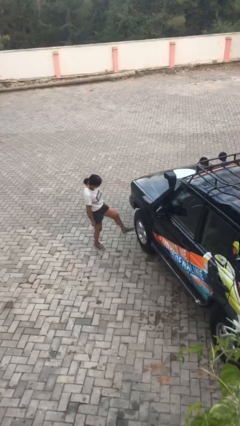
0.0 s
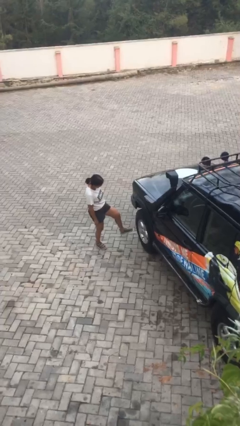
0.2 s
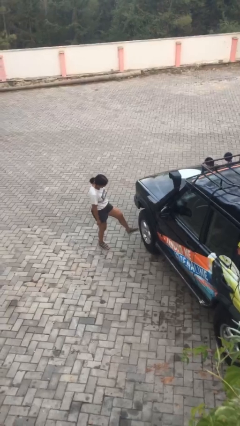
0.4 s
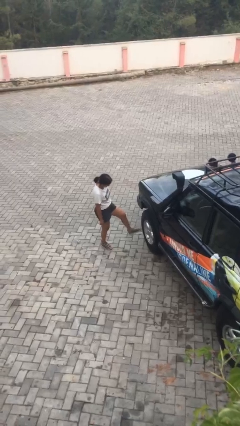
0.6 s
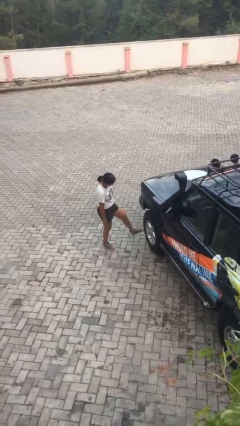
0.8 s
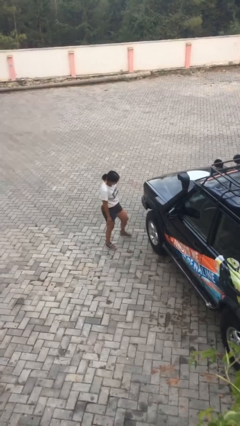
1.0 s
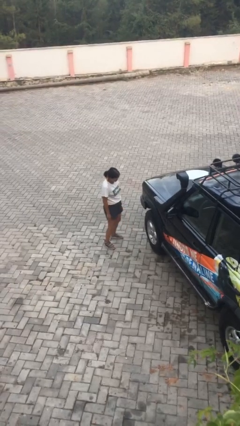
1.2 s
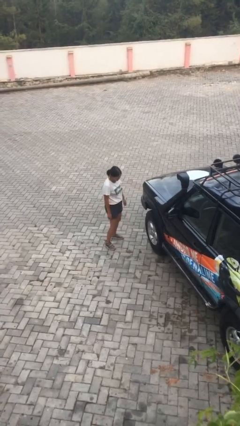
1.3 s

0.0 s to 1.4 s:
person kicks car tires

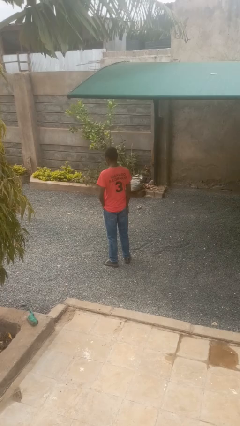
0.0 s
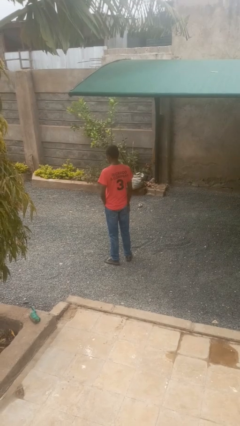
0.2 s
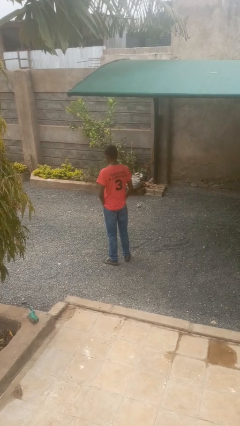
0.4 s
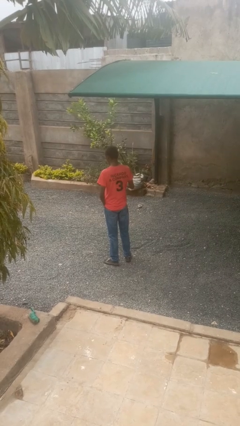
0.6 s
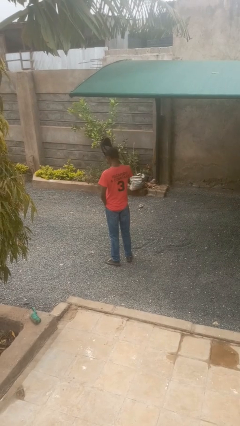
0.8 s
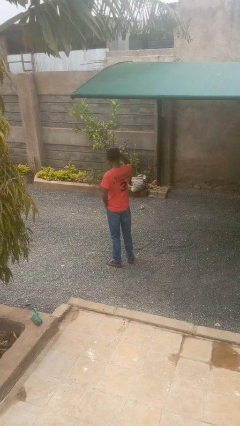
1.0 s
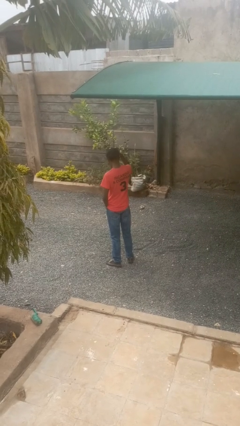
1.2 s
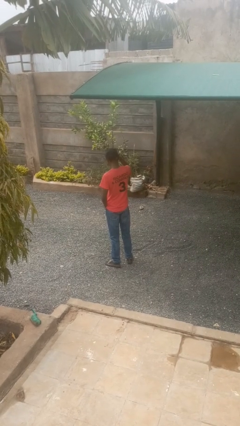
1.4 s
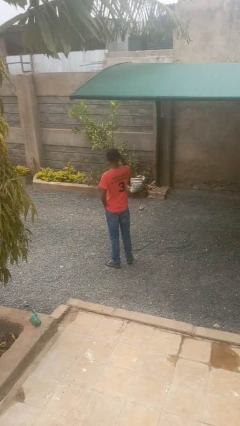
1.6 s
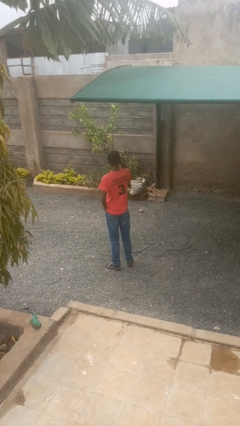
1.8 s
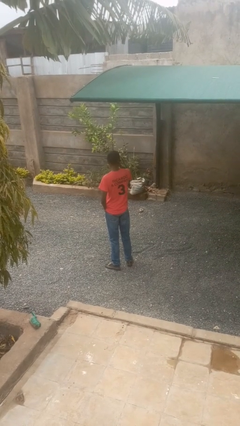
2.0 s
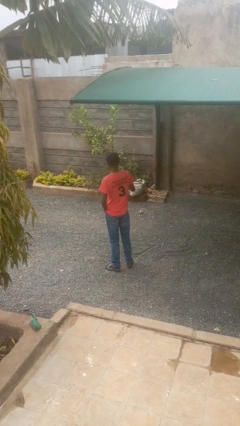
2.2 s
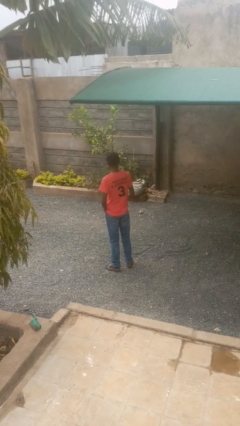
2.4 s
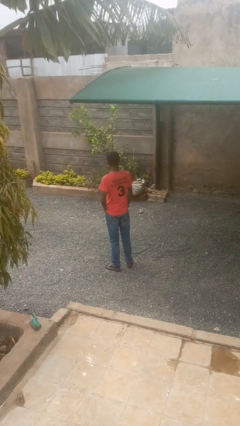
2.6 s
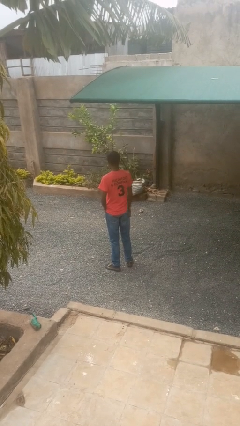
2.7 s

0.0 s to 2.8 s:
person puts on hat

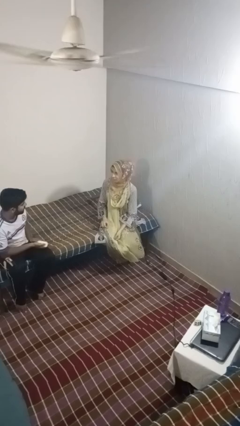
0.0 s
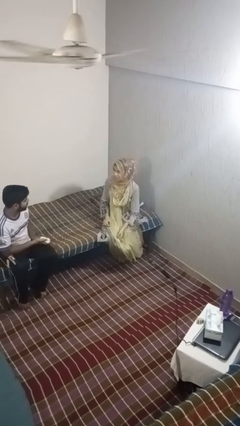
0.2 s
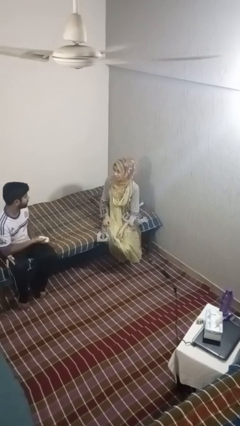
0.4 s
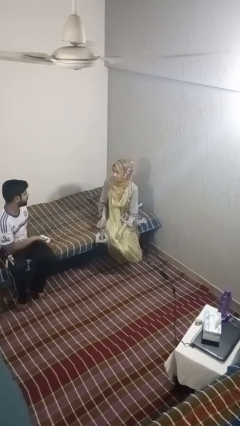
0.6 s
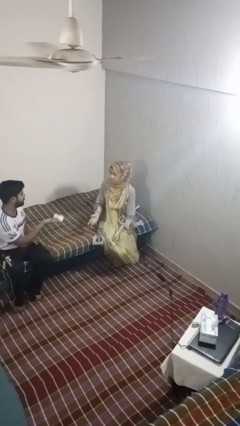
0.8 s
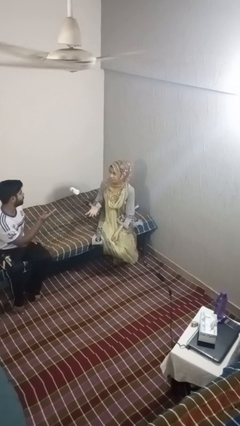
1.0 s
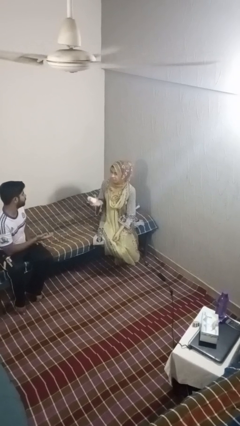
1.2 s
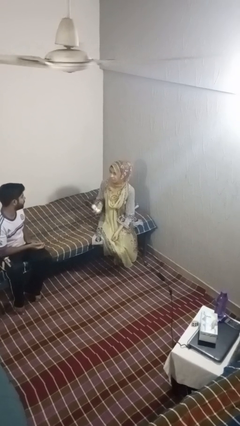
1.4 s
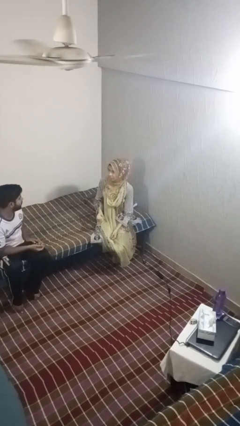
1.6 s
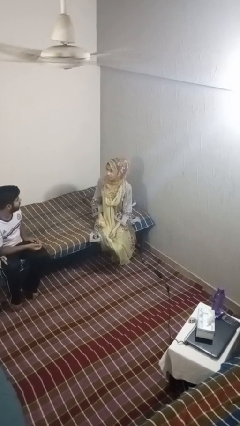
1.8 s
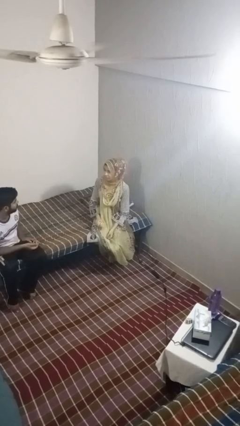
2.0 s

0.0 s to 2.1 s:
person catches object from person

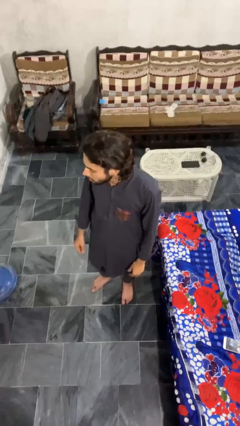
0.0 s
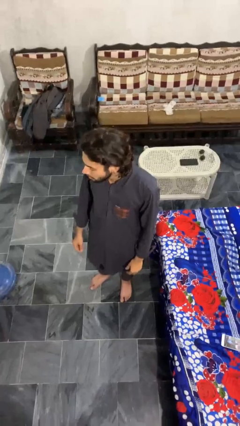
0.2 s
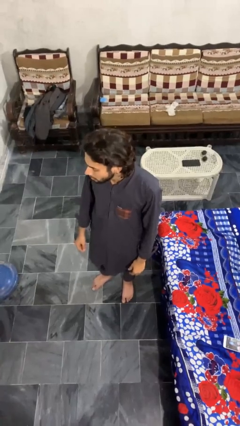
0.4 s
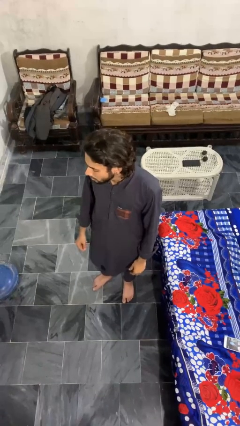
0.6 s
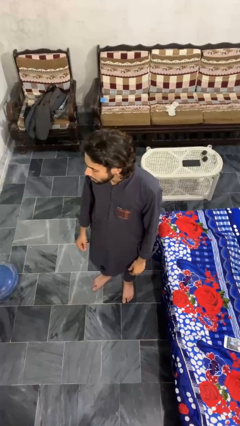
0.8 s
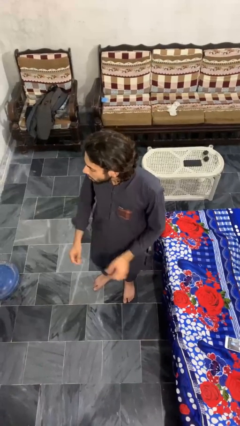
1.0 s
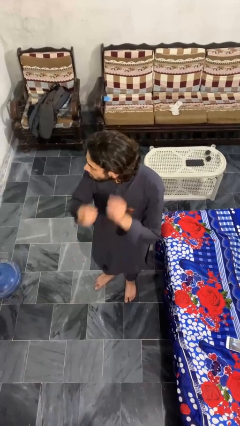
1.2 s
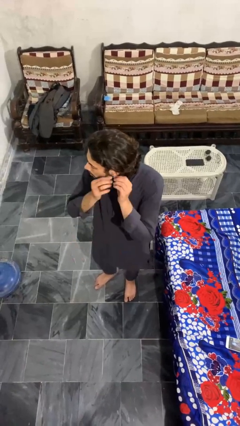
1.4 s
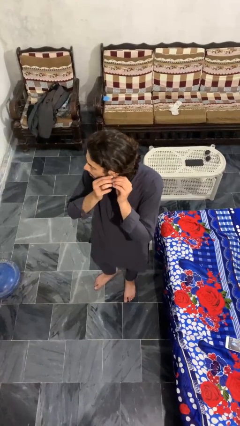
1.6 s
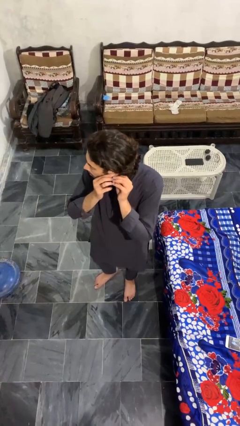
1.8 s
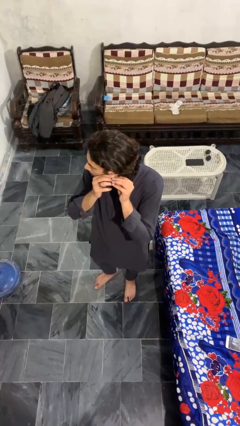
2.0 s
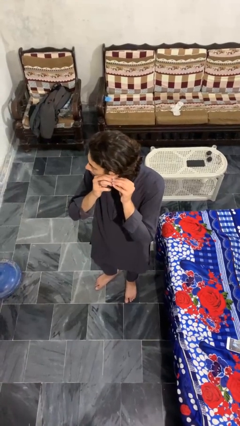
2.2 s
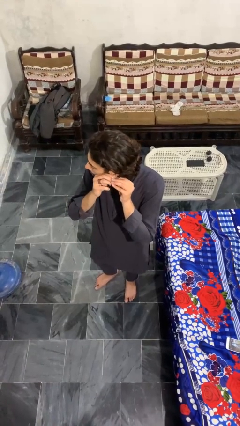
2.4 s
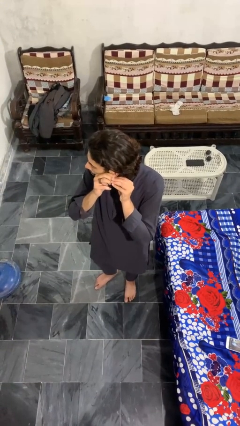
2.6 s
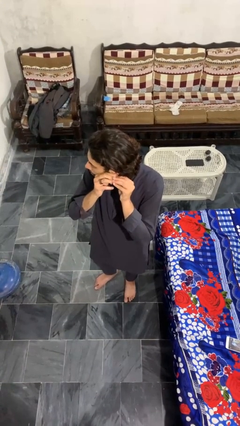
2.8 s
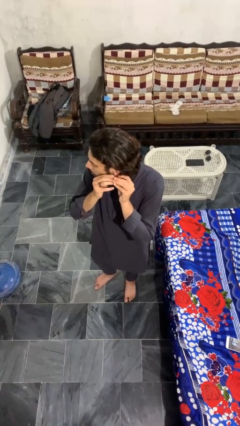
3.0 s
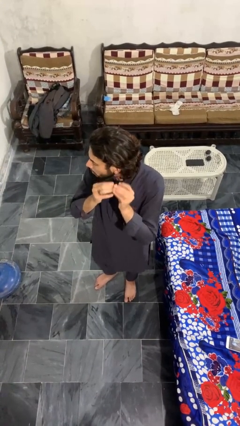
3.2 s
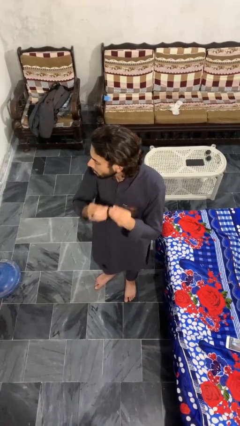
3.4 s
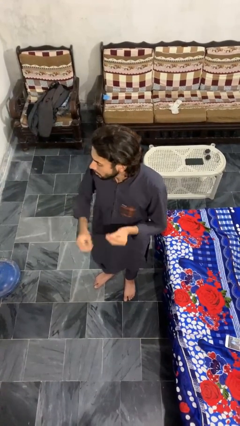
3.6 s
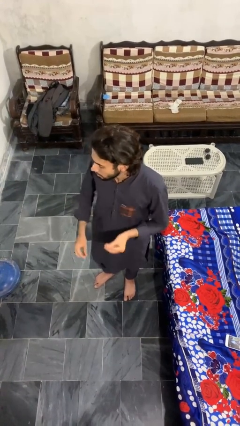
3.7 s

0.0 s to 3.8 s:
person takes off earrings

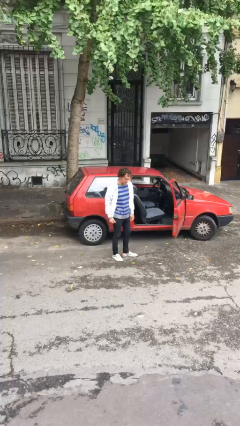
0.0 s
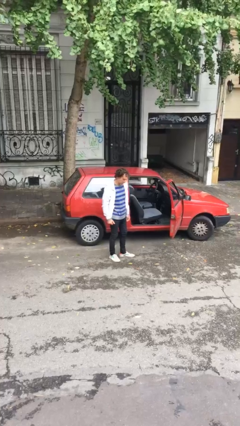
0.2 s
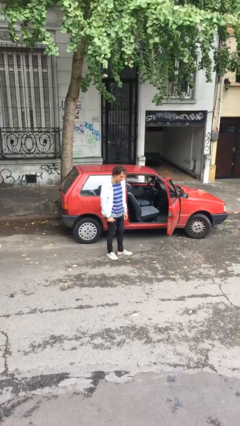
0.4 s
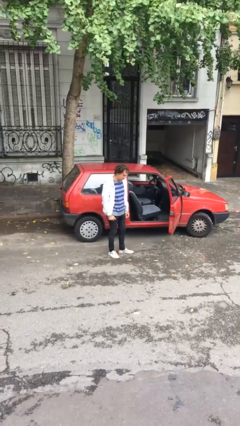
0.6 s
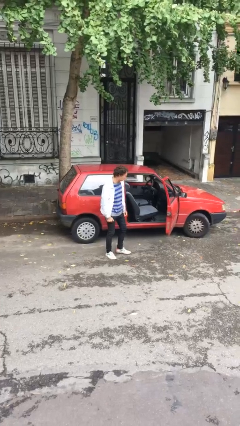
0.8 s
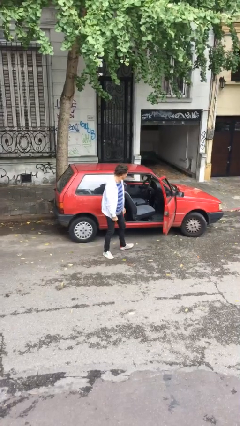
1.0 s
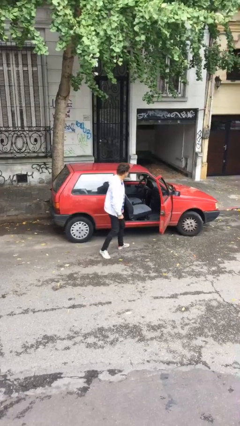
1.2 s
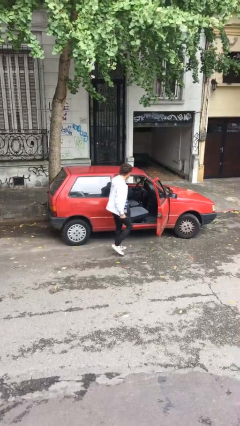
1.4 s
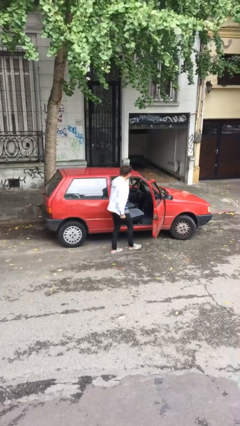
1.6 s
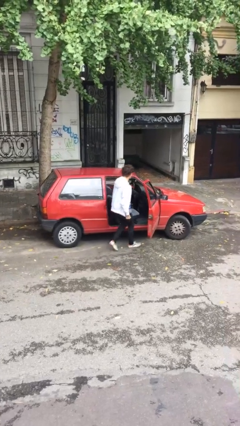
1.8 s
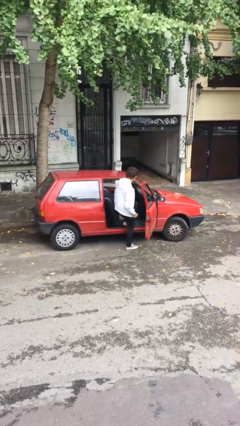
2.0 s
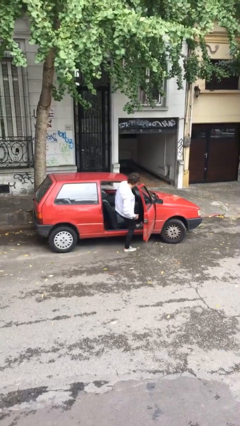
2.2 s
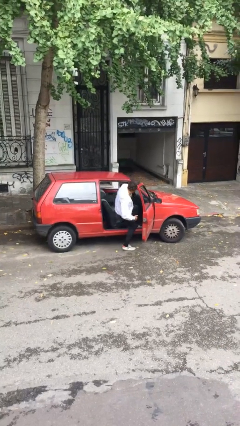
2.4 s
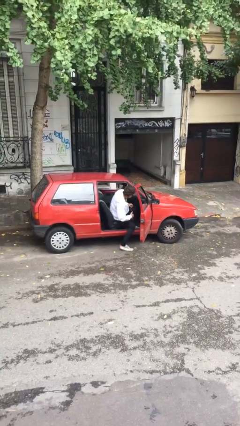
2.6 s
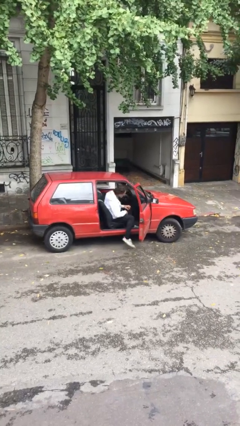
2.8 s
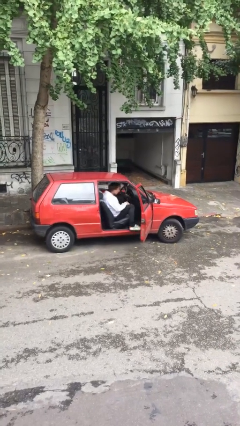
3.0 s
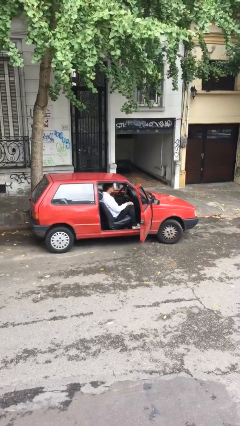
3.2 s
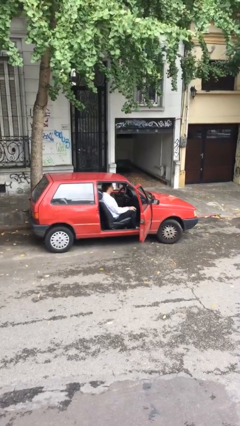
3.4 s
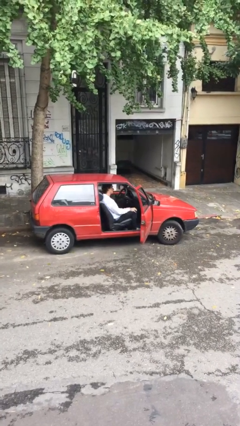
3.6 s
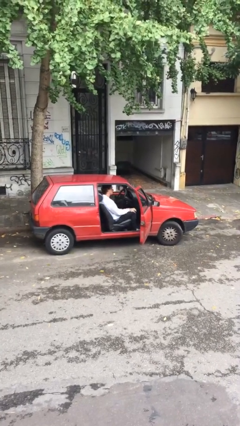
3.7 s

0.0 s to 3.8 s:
person enters car

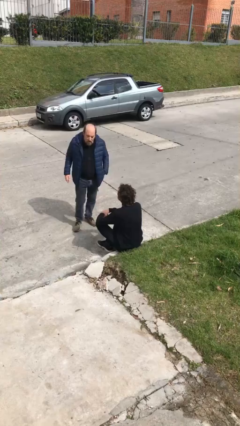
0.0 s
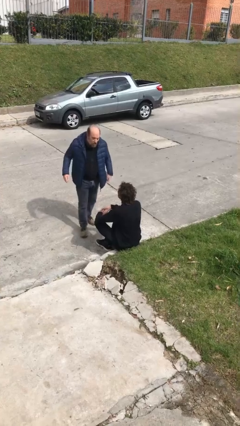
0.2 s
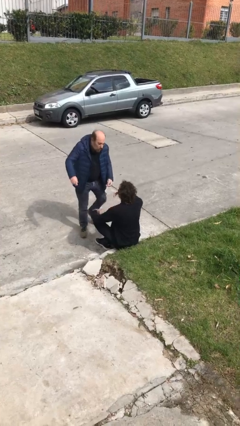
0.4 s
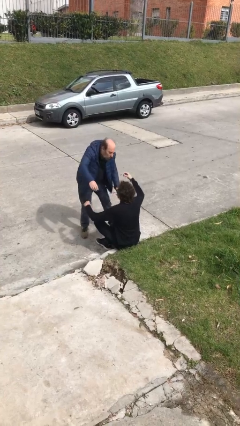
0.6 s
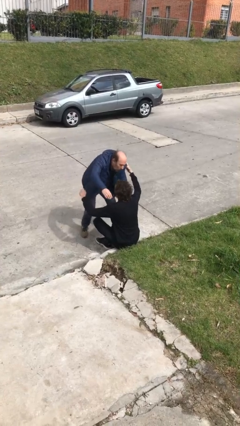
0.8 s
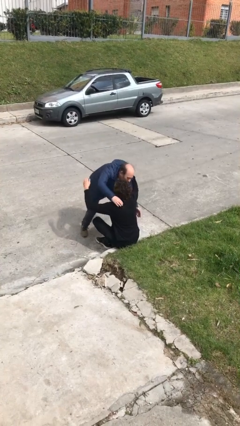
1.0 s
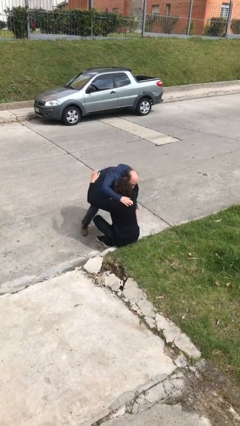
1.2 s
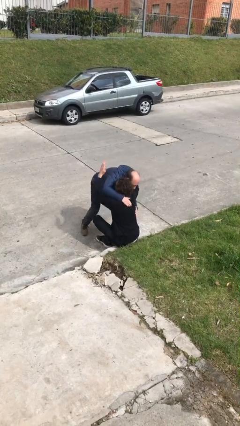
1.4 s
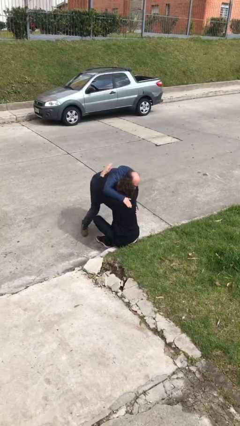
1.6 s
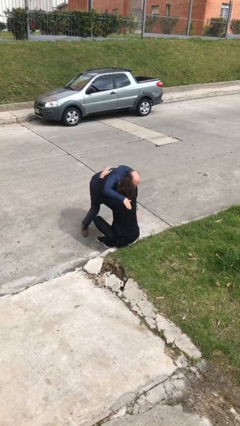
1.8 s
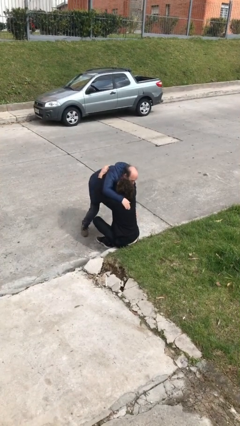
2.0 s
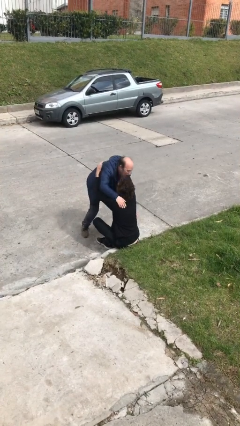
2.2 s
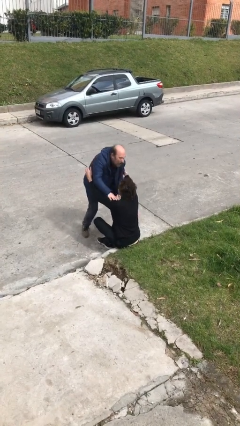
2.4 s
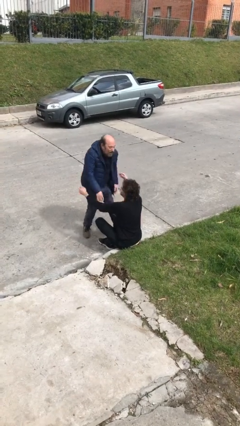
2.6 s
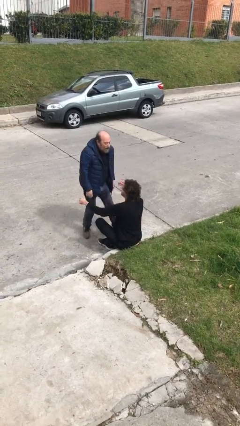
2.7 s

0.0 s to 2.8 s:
person embraces person

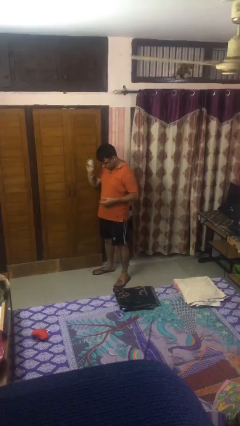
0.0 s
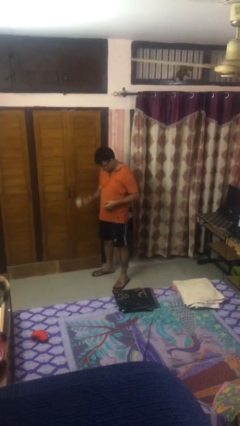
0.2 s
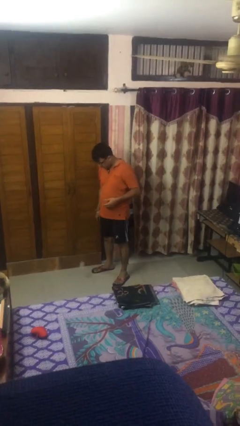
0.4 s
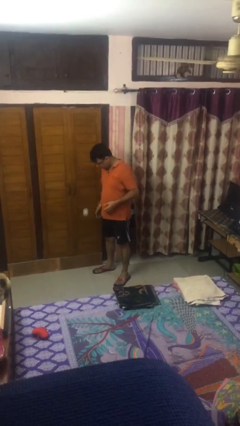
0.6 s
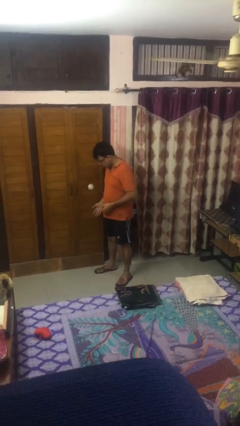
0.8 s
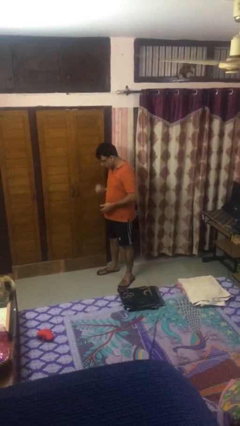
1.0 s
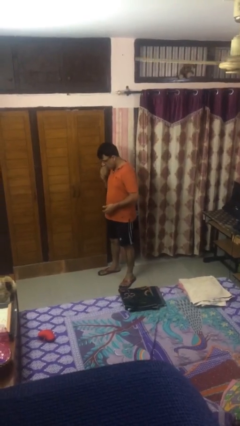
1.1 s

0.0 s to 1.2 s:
person bounces ball on floor
